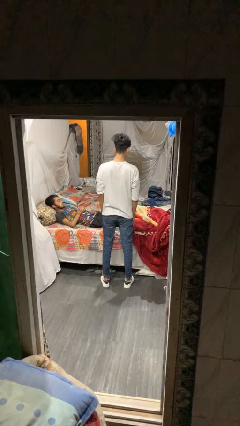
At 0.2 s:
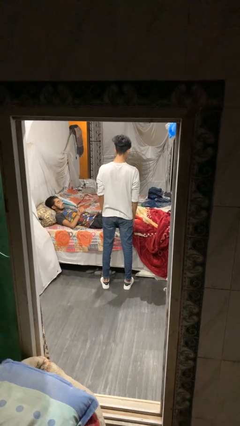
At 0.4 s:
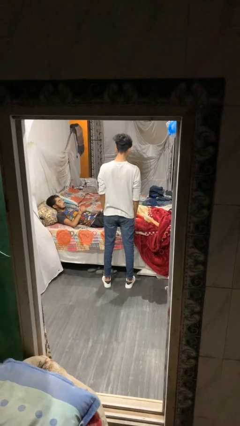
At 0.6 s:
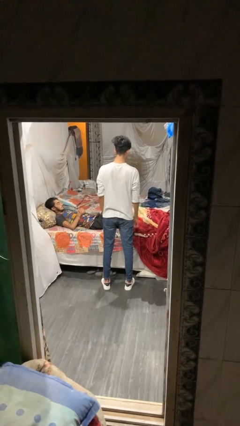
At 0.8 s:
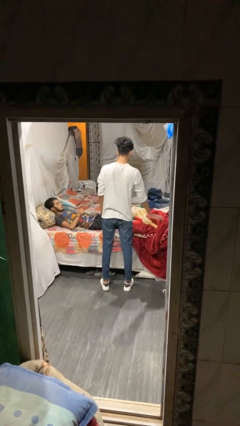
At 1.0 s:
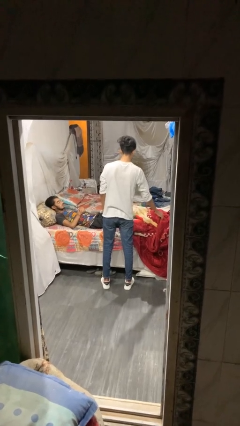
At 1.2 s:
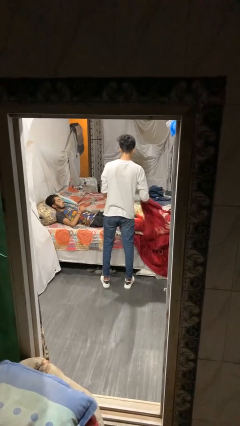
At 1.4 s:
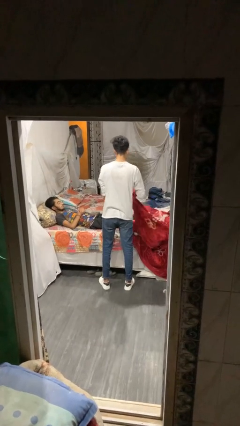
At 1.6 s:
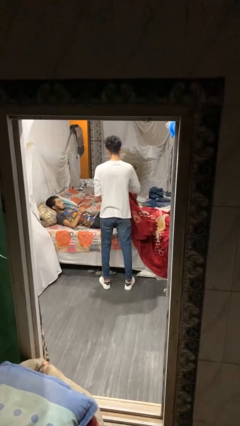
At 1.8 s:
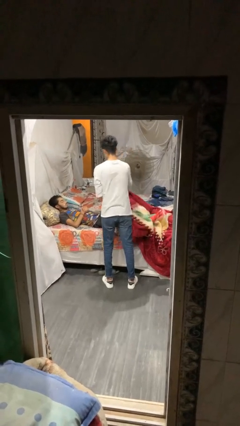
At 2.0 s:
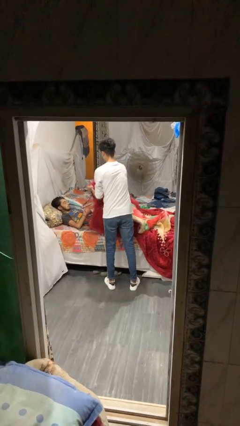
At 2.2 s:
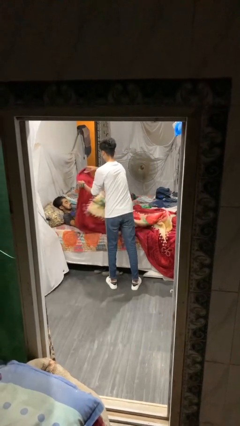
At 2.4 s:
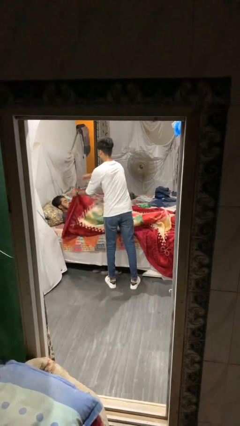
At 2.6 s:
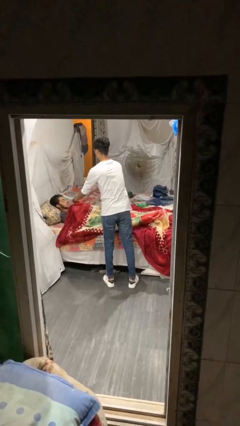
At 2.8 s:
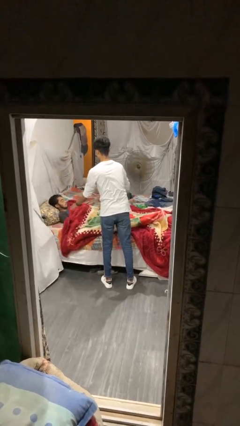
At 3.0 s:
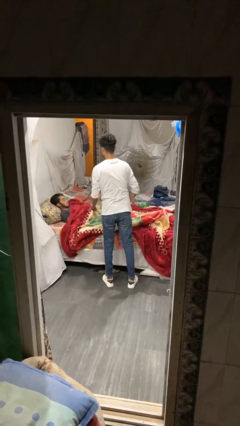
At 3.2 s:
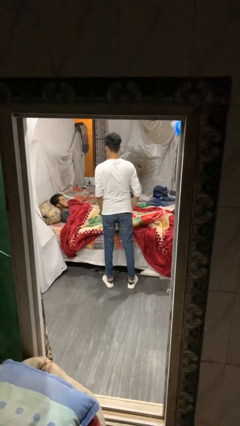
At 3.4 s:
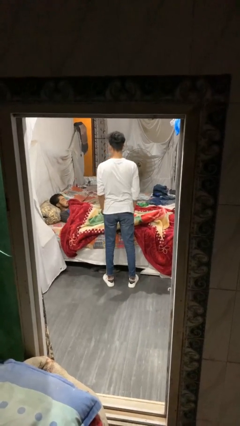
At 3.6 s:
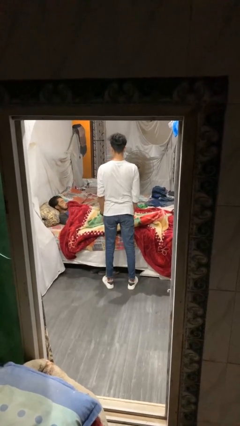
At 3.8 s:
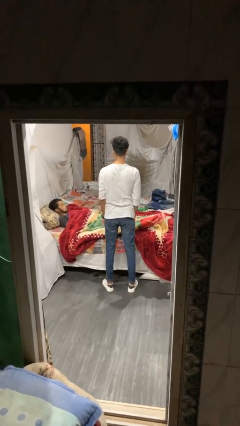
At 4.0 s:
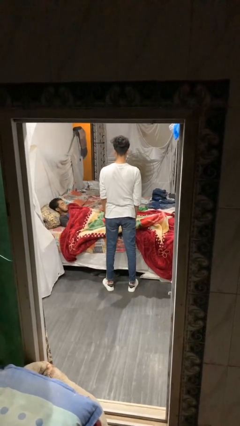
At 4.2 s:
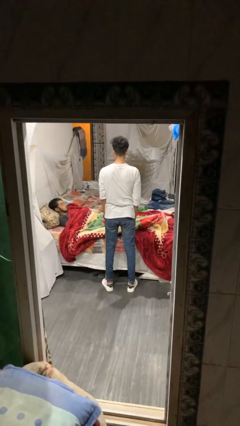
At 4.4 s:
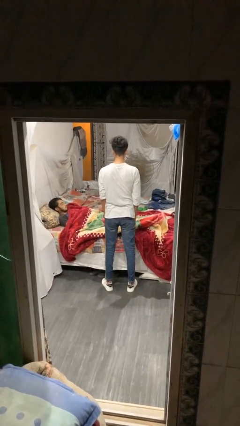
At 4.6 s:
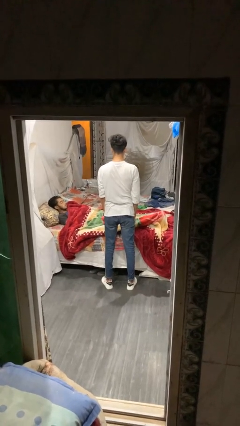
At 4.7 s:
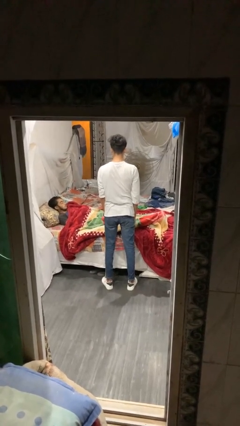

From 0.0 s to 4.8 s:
person covers friend with blanket

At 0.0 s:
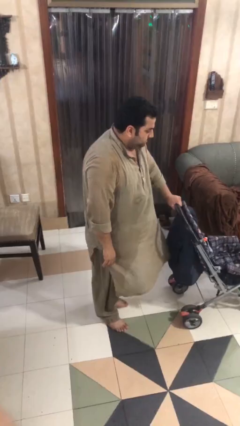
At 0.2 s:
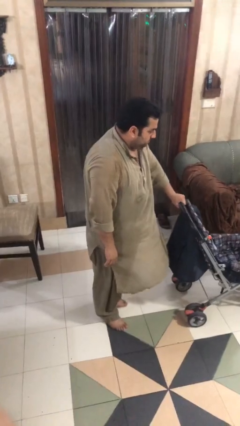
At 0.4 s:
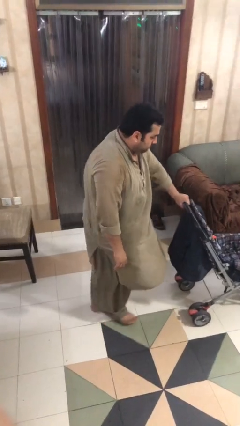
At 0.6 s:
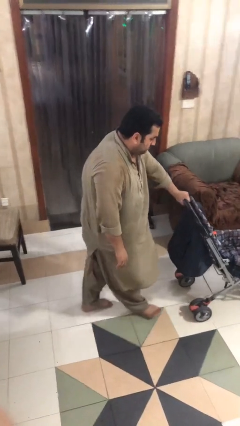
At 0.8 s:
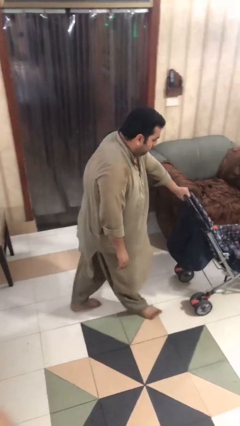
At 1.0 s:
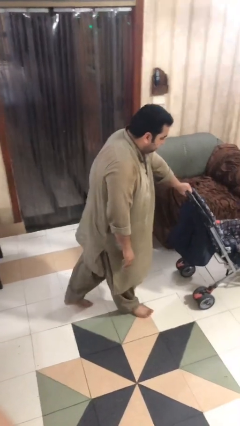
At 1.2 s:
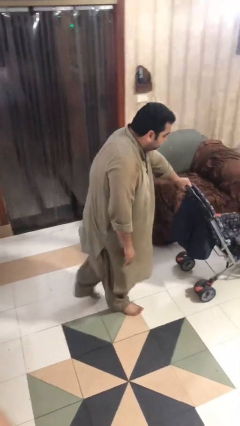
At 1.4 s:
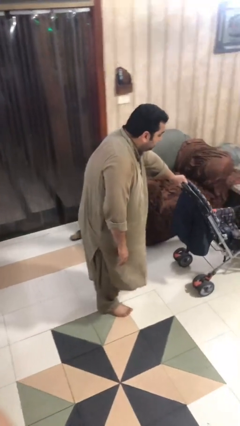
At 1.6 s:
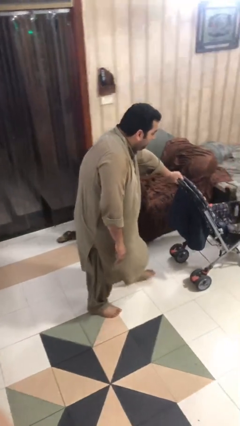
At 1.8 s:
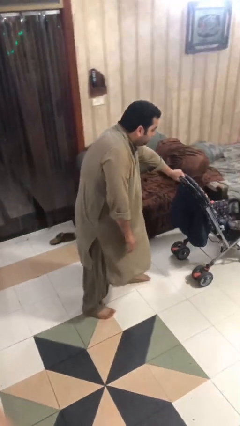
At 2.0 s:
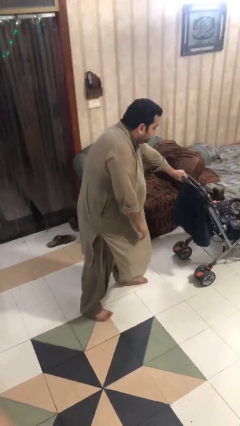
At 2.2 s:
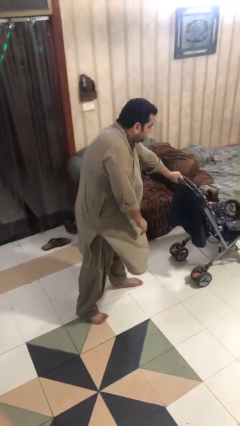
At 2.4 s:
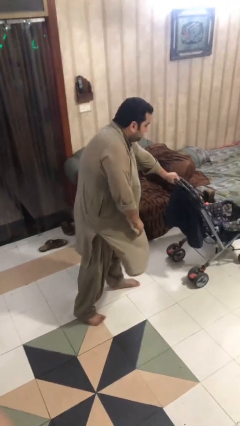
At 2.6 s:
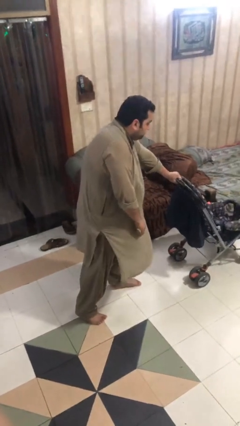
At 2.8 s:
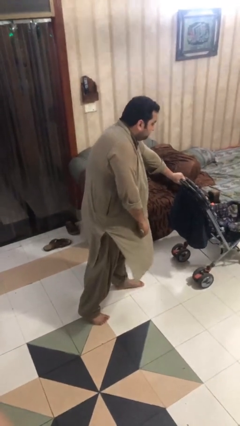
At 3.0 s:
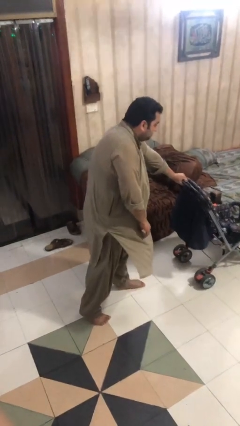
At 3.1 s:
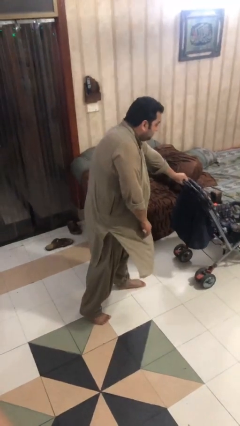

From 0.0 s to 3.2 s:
person pushes wheeled cart

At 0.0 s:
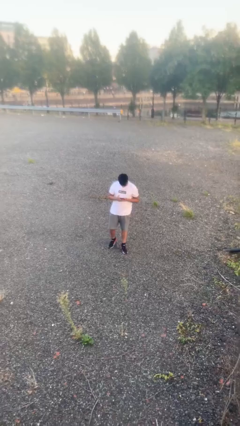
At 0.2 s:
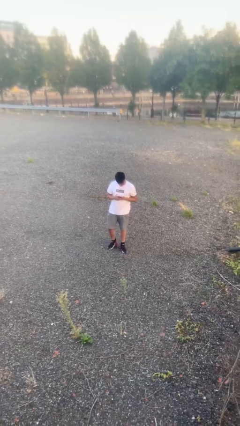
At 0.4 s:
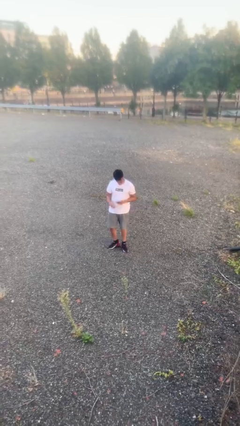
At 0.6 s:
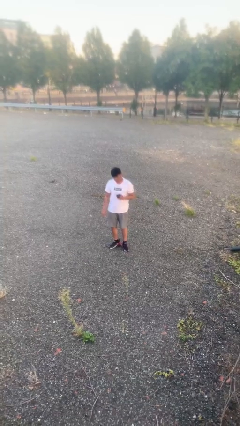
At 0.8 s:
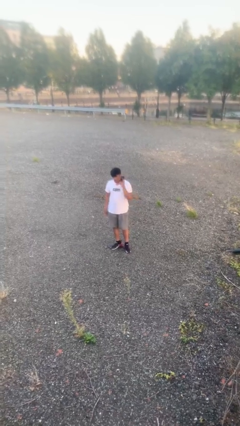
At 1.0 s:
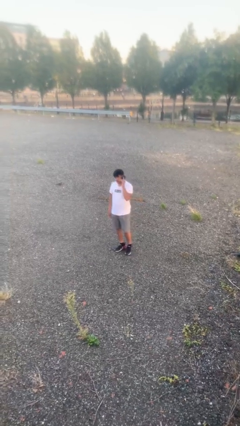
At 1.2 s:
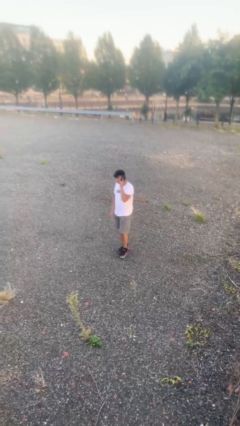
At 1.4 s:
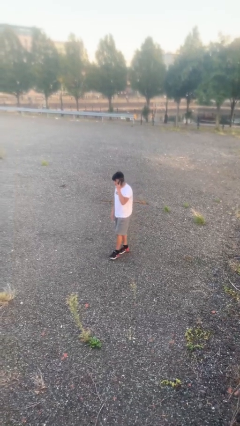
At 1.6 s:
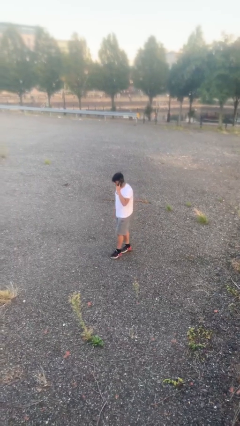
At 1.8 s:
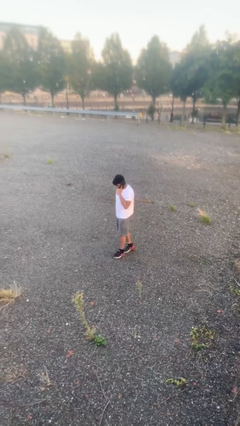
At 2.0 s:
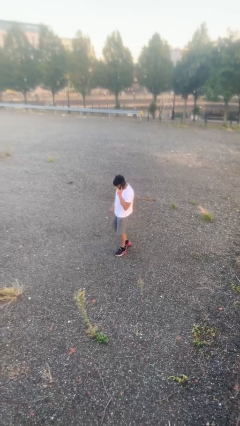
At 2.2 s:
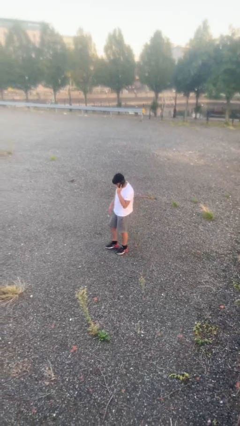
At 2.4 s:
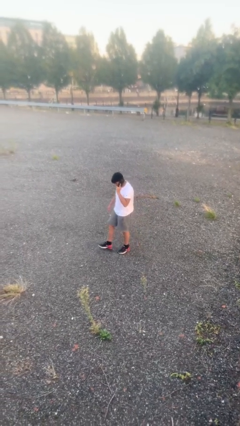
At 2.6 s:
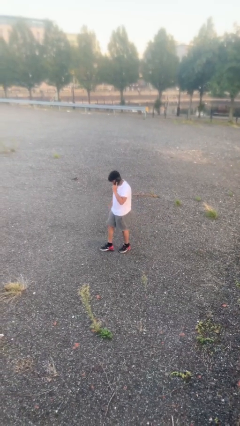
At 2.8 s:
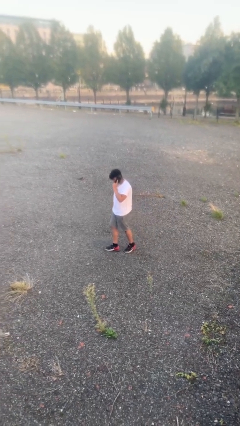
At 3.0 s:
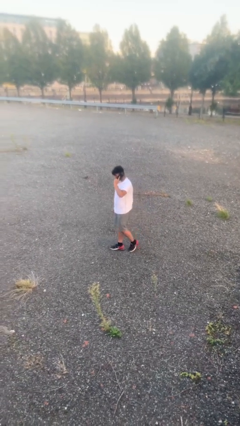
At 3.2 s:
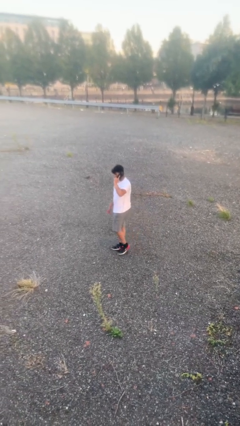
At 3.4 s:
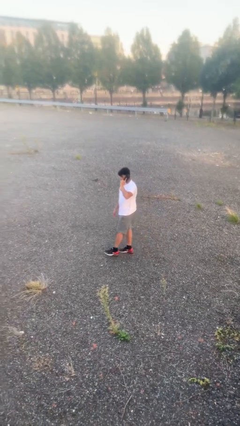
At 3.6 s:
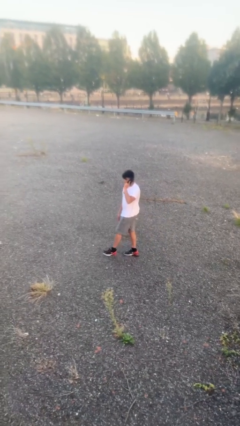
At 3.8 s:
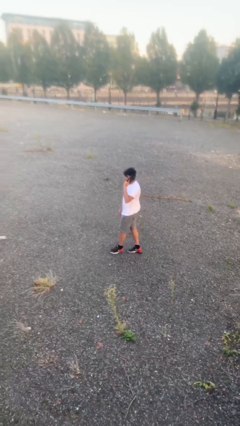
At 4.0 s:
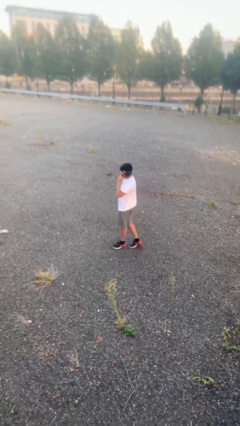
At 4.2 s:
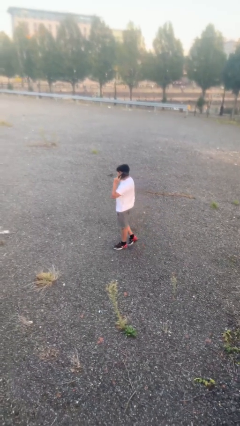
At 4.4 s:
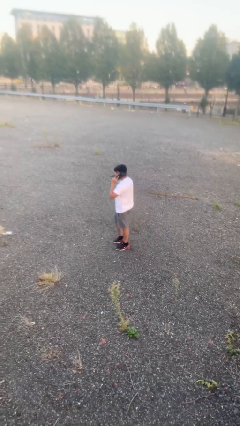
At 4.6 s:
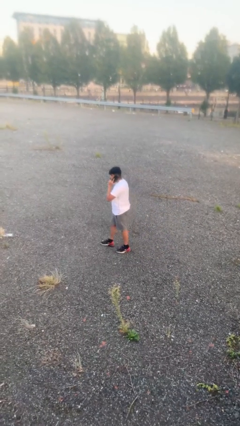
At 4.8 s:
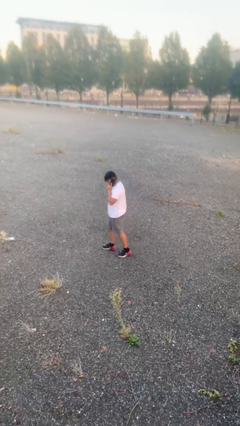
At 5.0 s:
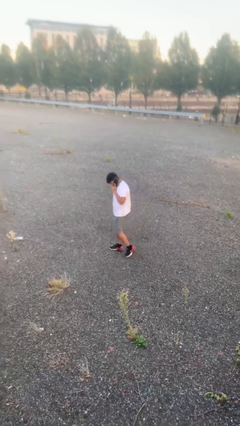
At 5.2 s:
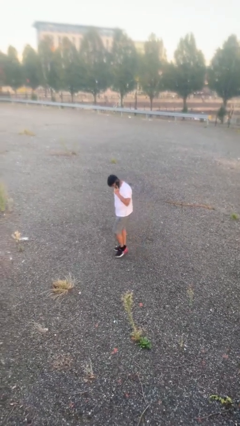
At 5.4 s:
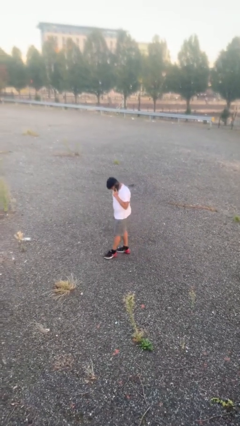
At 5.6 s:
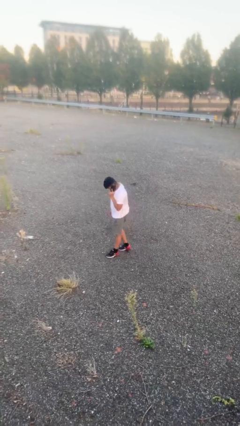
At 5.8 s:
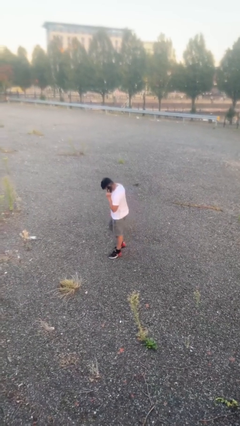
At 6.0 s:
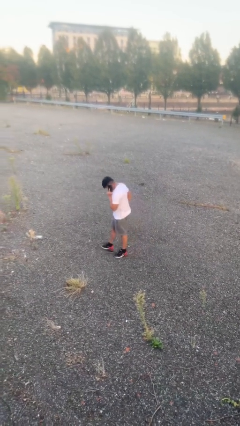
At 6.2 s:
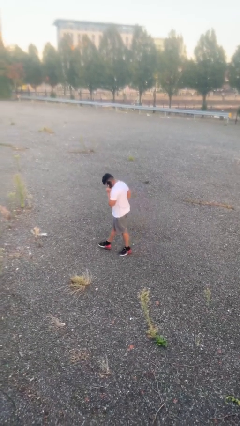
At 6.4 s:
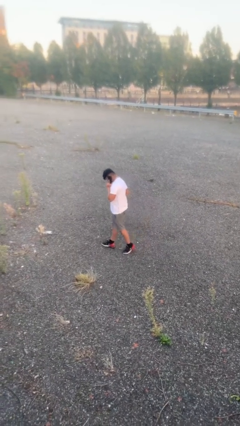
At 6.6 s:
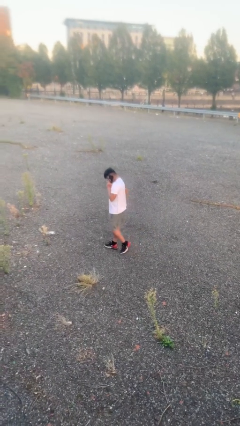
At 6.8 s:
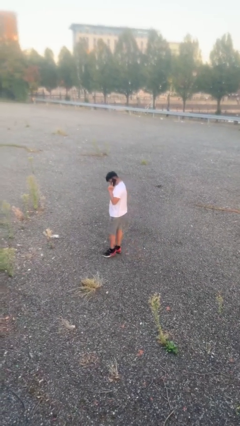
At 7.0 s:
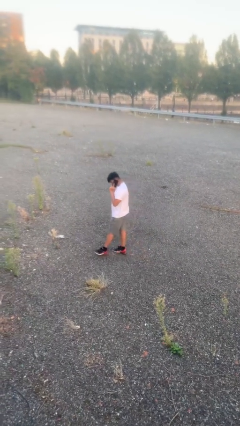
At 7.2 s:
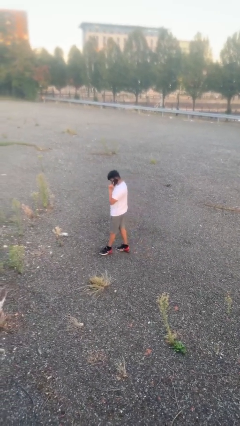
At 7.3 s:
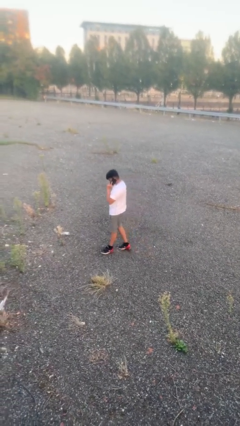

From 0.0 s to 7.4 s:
person talks on phone

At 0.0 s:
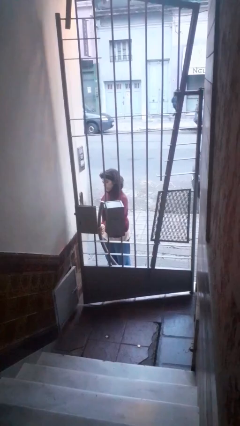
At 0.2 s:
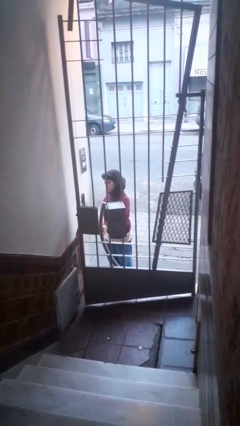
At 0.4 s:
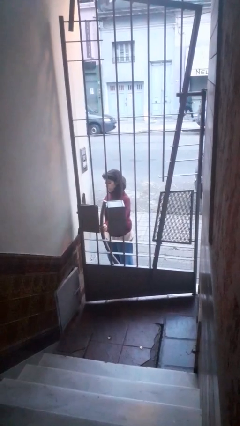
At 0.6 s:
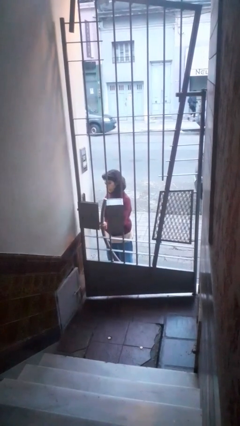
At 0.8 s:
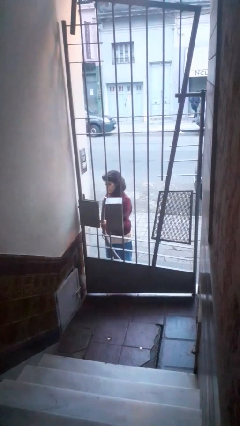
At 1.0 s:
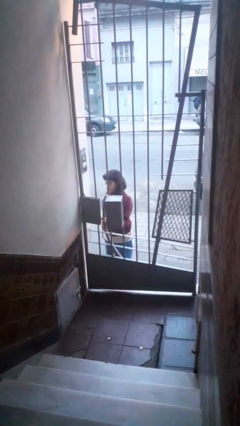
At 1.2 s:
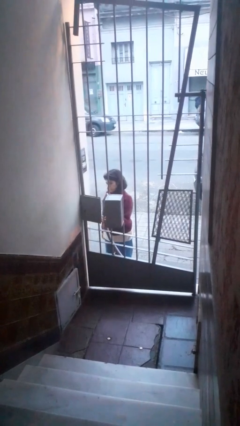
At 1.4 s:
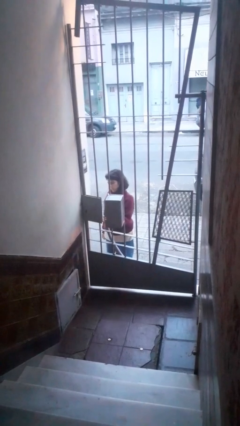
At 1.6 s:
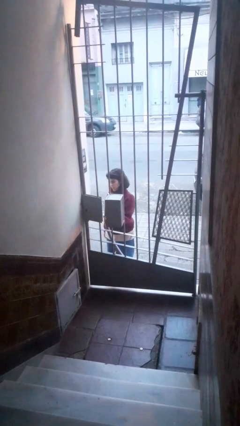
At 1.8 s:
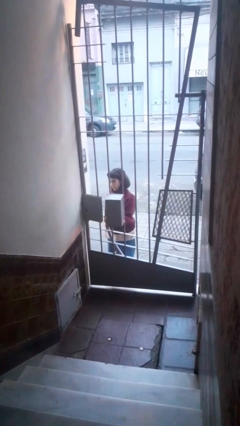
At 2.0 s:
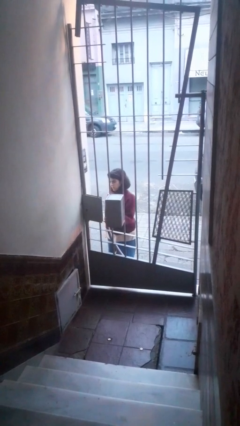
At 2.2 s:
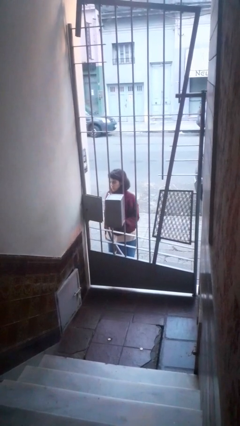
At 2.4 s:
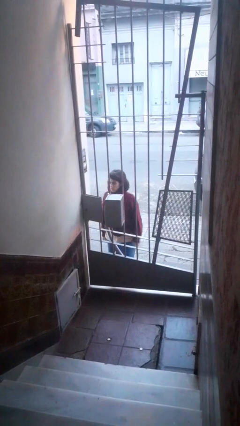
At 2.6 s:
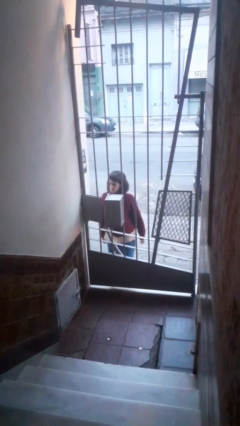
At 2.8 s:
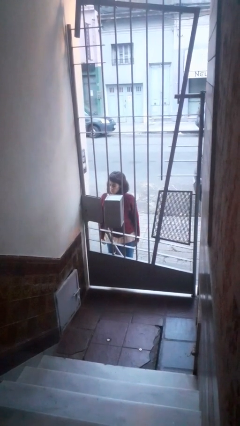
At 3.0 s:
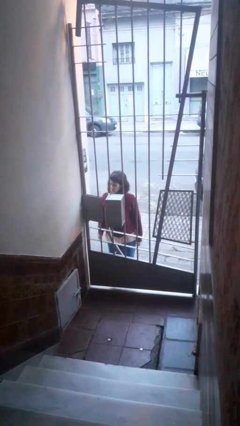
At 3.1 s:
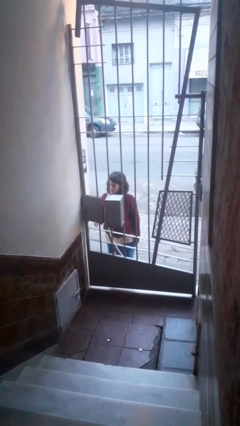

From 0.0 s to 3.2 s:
person closes gate
